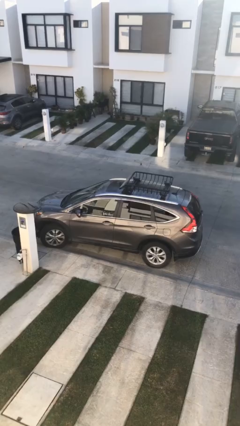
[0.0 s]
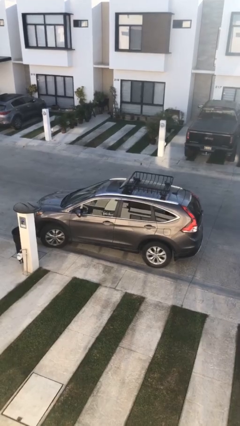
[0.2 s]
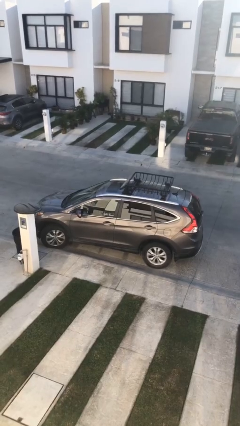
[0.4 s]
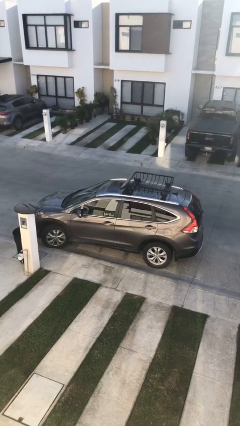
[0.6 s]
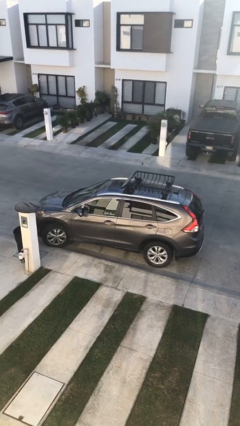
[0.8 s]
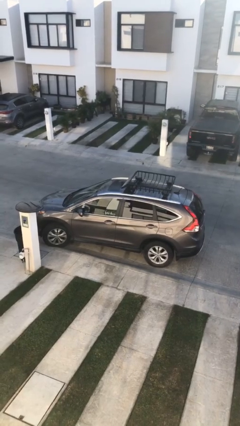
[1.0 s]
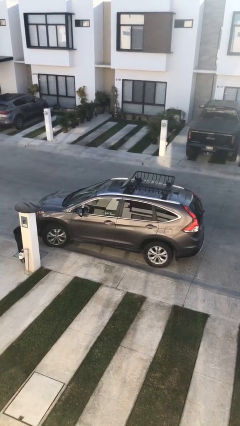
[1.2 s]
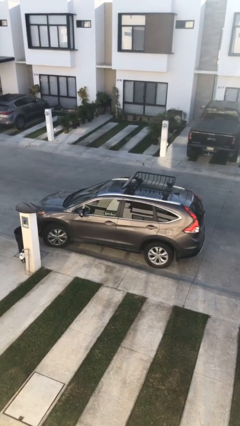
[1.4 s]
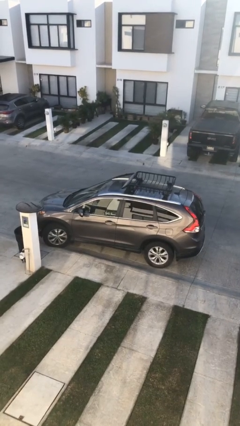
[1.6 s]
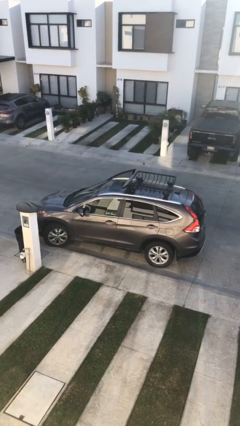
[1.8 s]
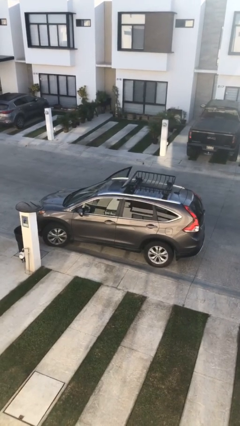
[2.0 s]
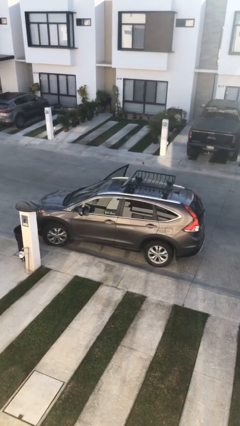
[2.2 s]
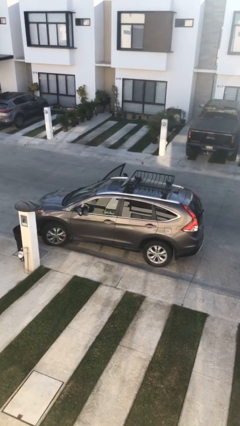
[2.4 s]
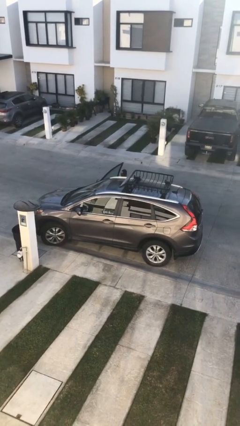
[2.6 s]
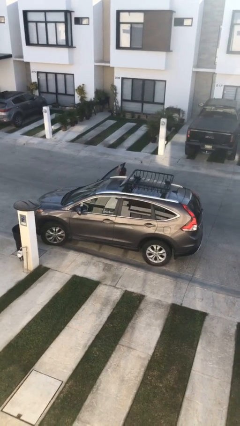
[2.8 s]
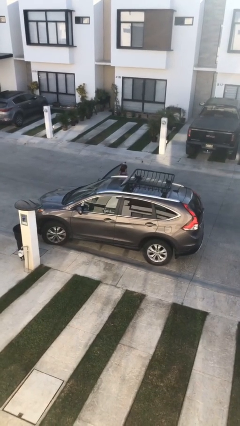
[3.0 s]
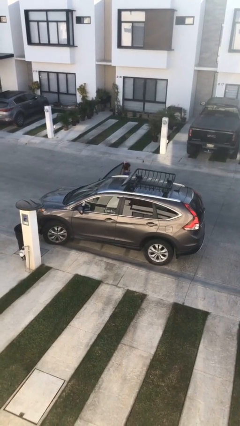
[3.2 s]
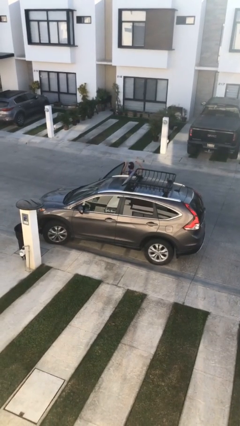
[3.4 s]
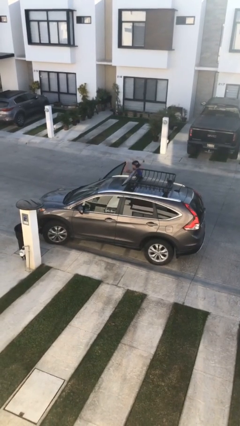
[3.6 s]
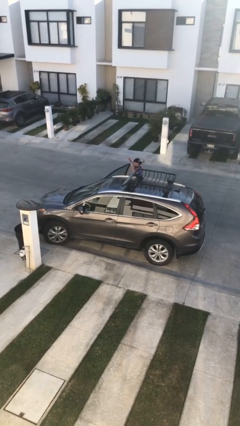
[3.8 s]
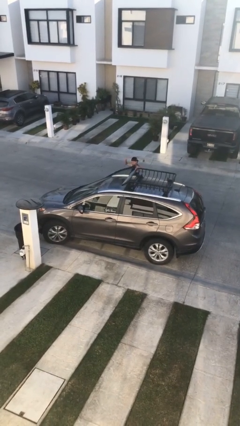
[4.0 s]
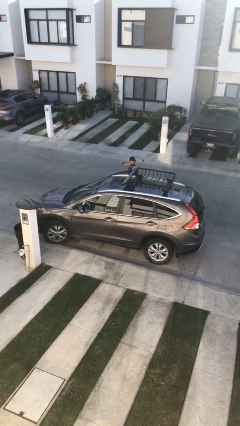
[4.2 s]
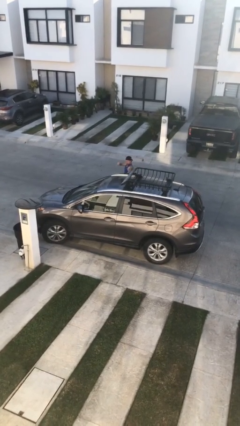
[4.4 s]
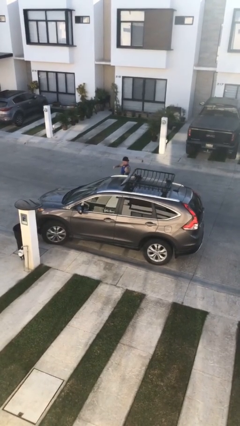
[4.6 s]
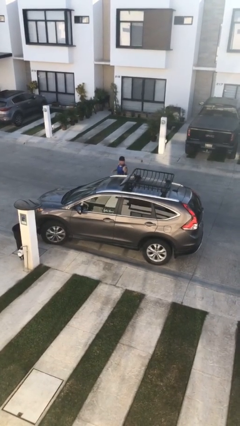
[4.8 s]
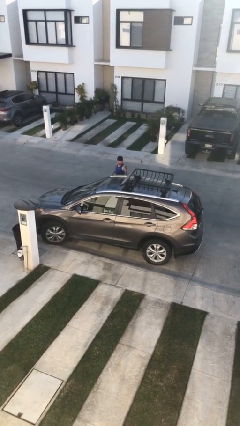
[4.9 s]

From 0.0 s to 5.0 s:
car drops off person

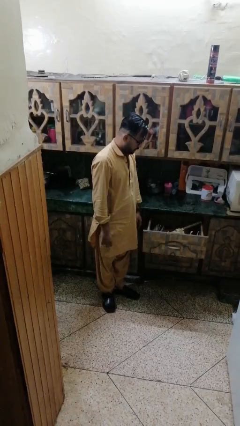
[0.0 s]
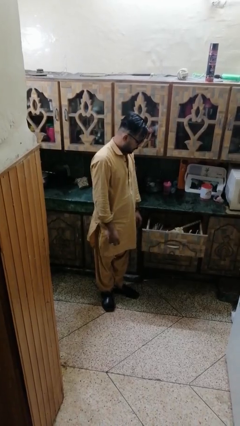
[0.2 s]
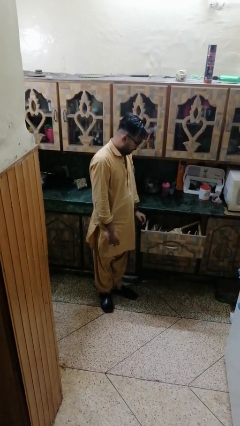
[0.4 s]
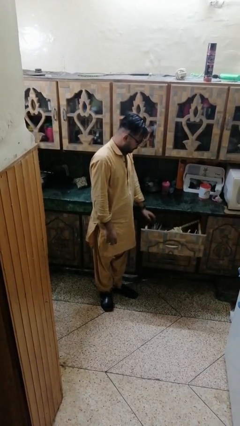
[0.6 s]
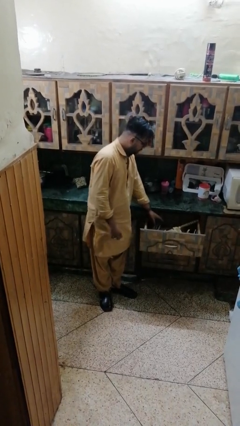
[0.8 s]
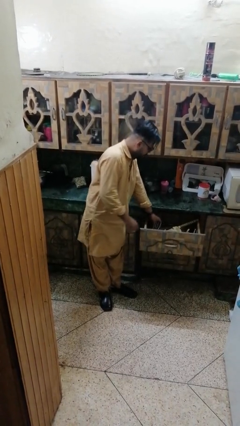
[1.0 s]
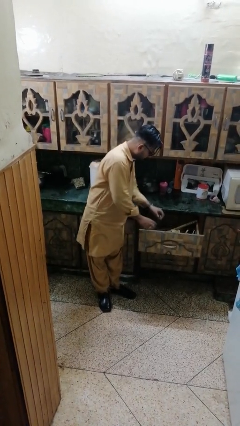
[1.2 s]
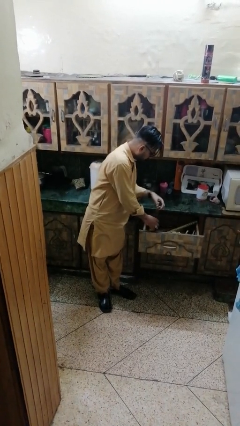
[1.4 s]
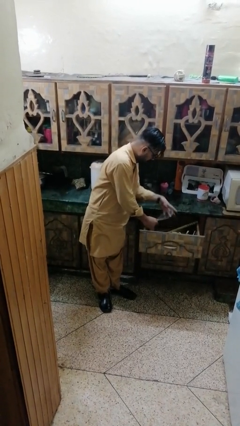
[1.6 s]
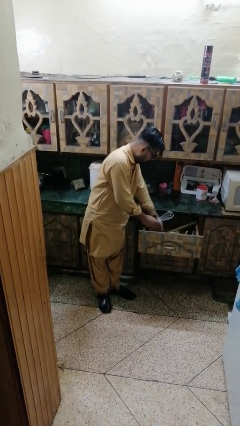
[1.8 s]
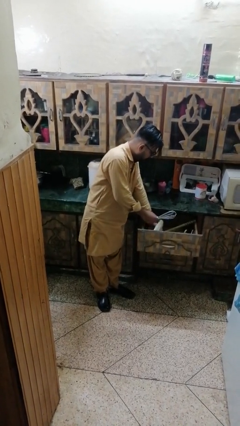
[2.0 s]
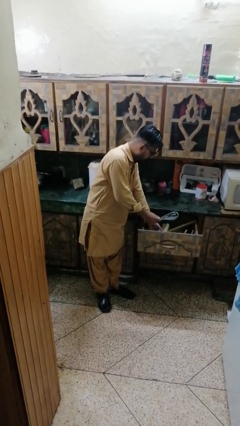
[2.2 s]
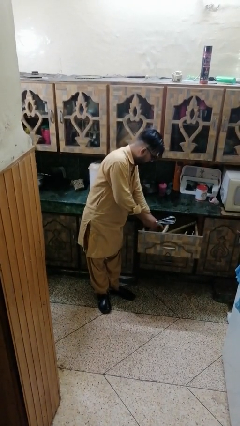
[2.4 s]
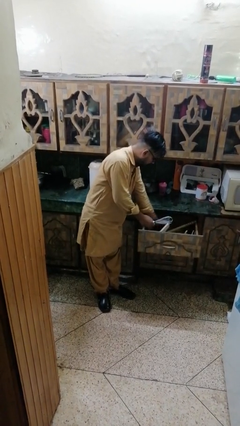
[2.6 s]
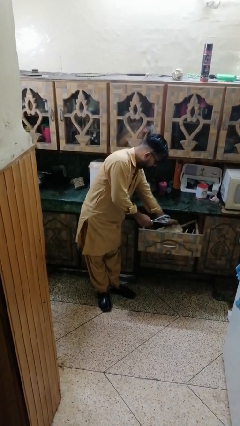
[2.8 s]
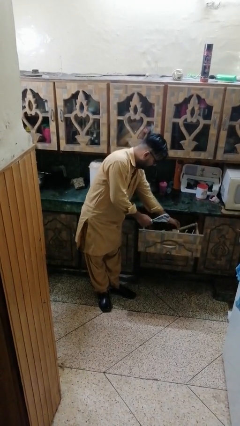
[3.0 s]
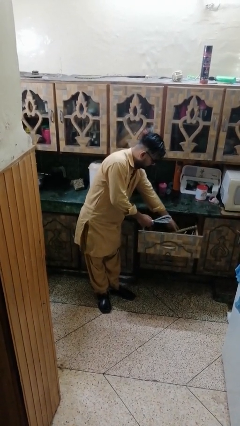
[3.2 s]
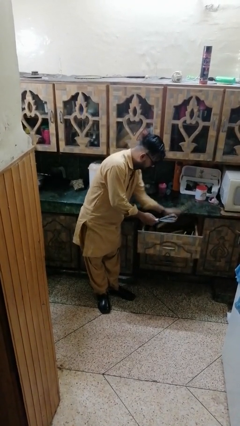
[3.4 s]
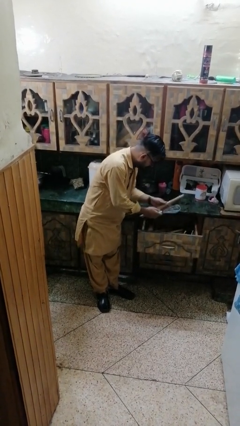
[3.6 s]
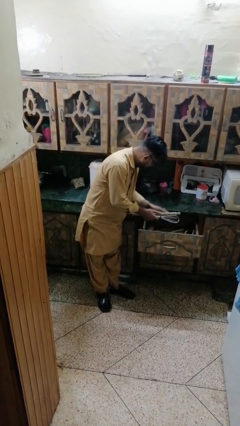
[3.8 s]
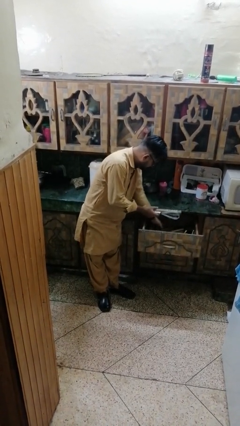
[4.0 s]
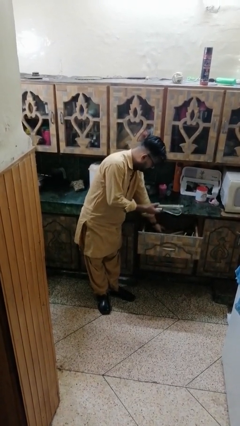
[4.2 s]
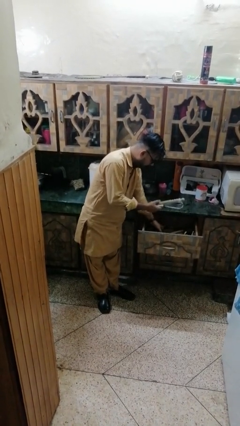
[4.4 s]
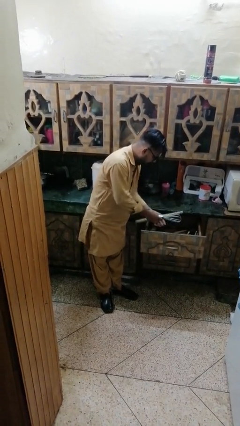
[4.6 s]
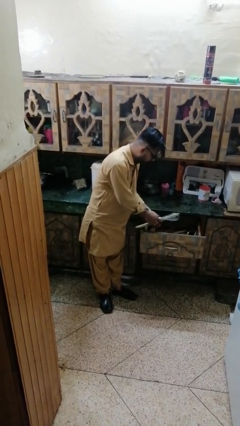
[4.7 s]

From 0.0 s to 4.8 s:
person searches in kitchen drawer

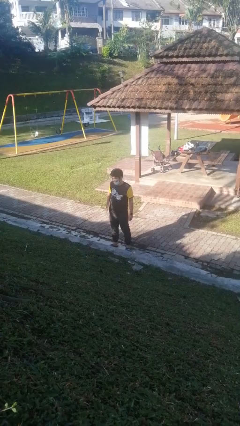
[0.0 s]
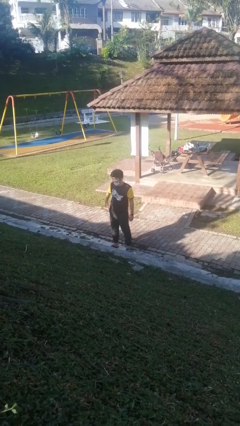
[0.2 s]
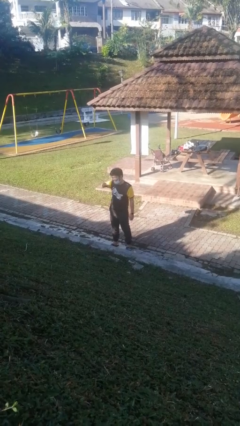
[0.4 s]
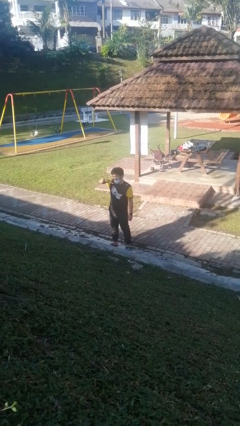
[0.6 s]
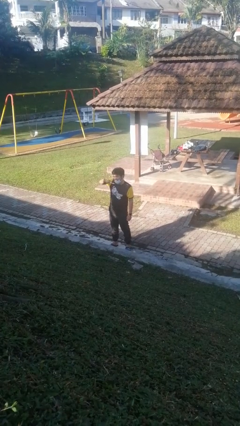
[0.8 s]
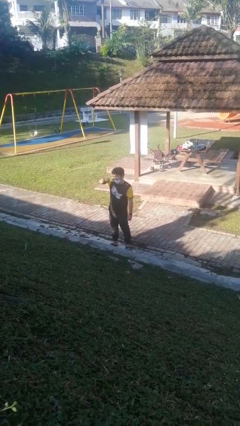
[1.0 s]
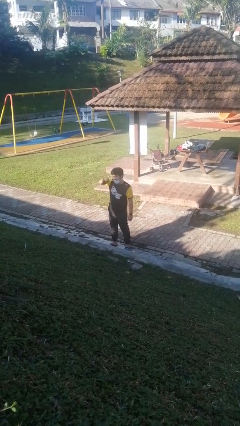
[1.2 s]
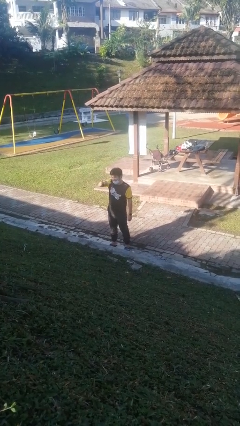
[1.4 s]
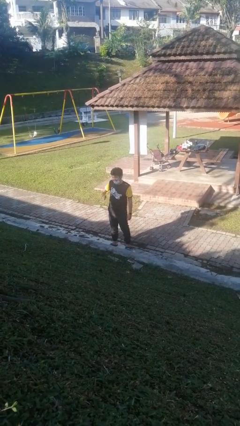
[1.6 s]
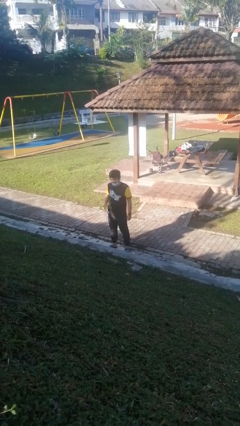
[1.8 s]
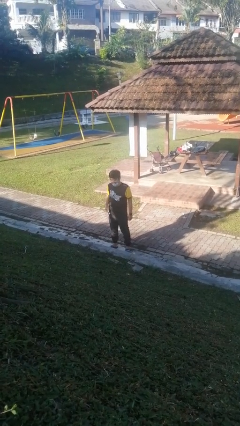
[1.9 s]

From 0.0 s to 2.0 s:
person brushes teeth

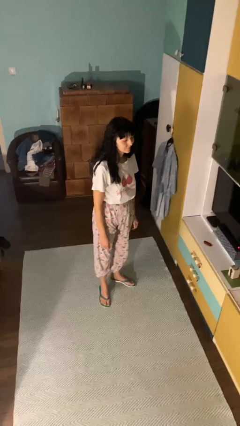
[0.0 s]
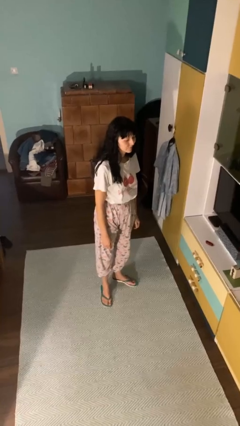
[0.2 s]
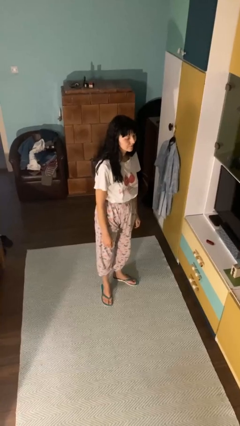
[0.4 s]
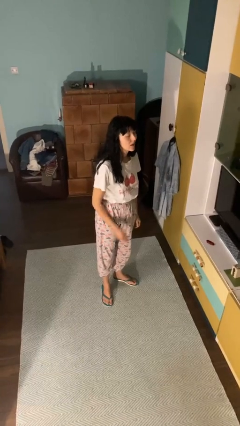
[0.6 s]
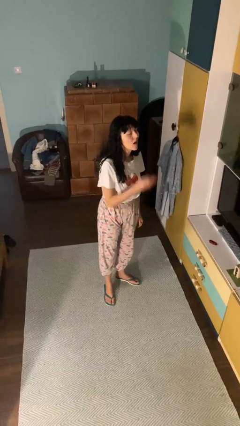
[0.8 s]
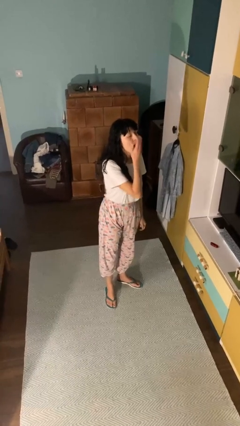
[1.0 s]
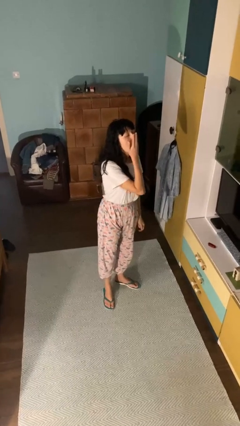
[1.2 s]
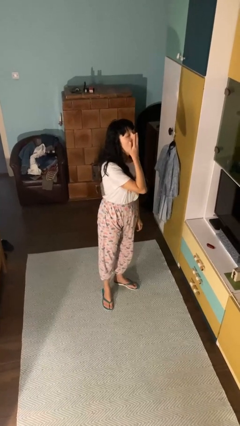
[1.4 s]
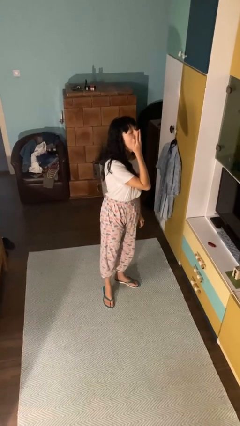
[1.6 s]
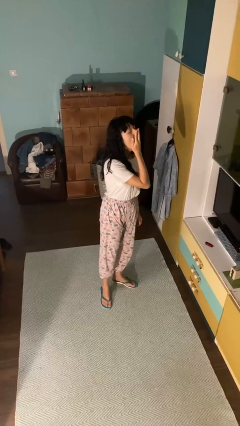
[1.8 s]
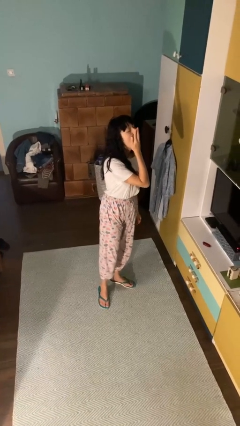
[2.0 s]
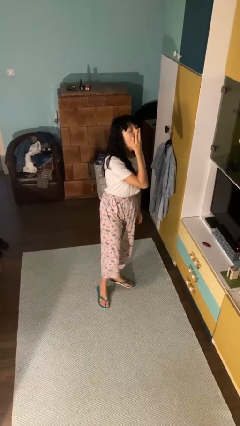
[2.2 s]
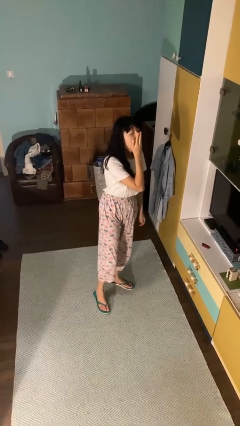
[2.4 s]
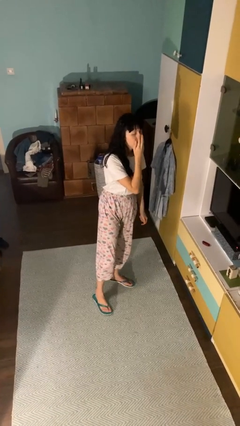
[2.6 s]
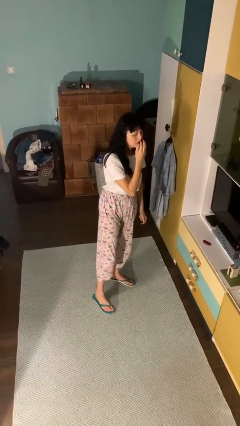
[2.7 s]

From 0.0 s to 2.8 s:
person yawns

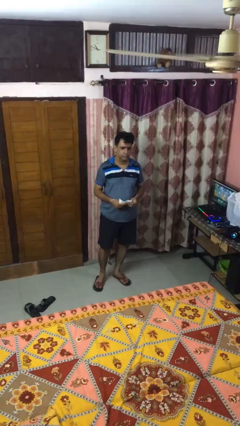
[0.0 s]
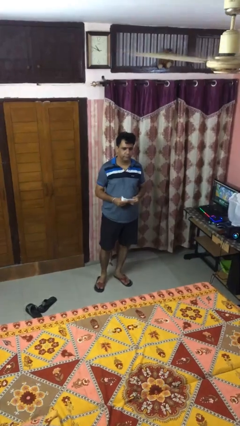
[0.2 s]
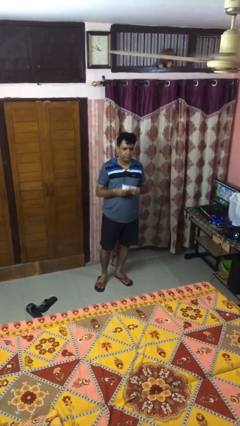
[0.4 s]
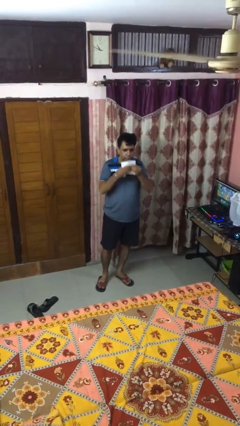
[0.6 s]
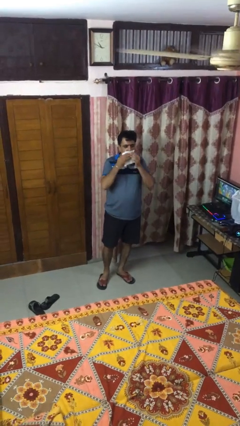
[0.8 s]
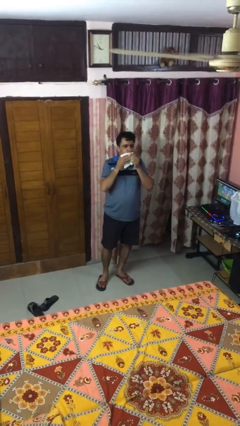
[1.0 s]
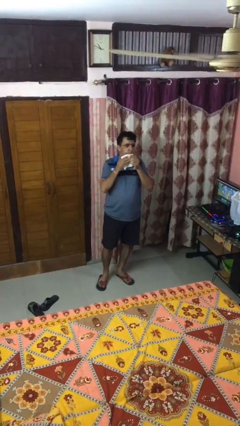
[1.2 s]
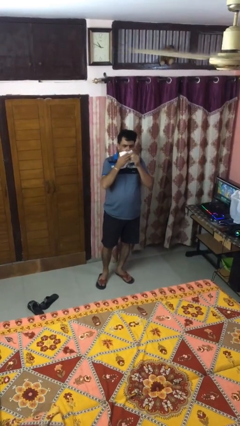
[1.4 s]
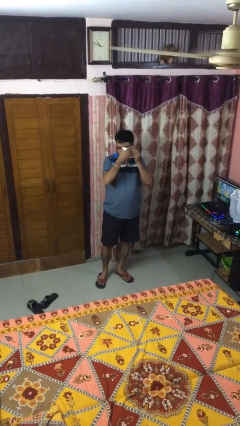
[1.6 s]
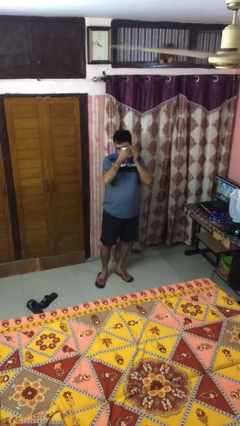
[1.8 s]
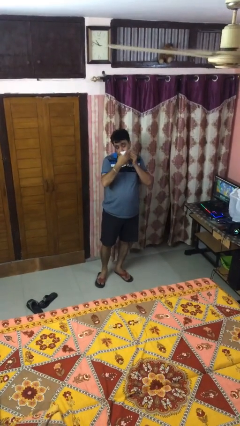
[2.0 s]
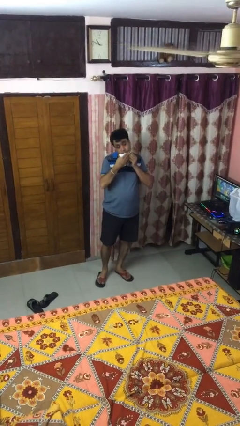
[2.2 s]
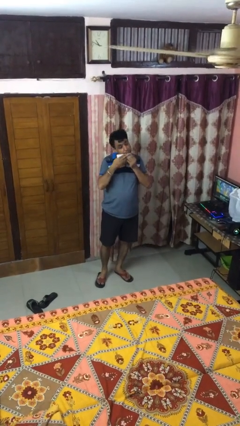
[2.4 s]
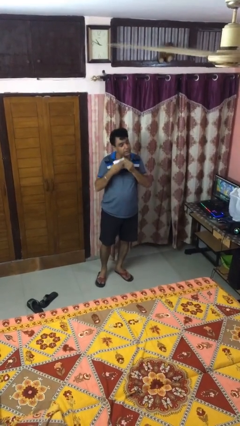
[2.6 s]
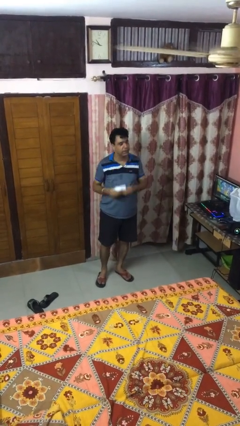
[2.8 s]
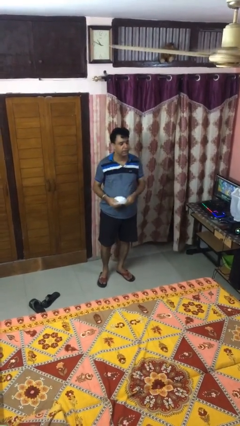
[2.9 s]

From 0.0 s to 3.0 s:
person wipes mouth with napkin

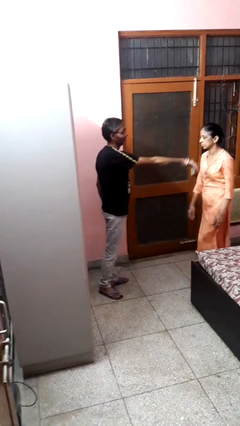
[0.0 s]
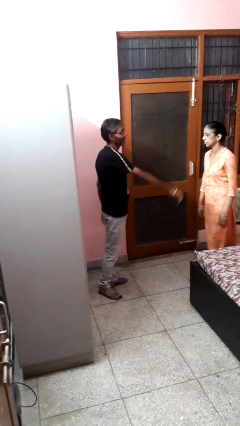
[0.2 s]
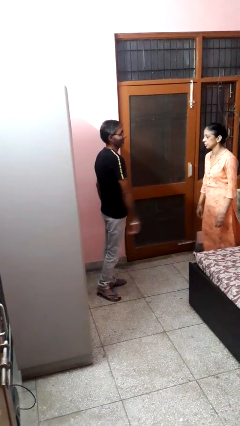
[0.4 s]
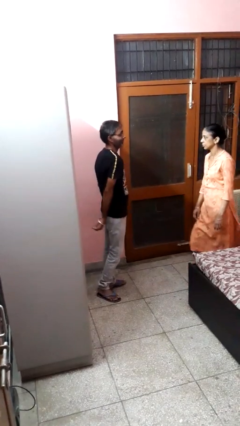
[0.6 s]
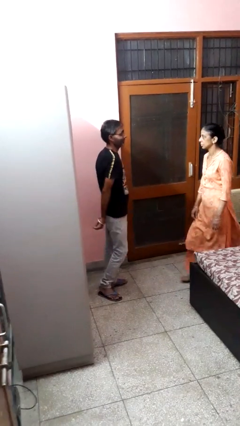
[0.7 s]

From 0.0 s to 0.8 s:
person shoves person
